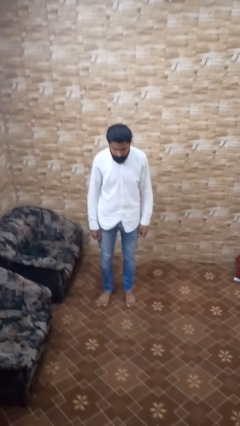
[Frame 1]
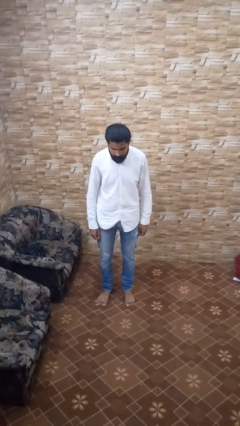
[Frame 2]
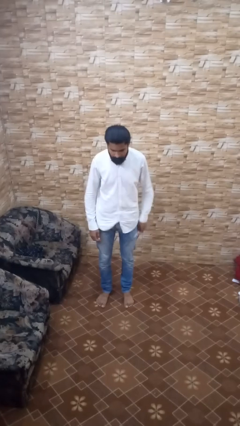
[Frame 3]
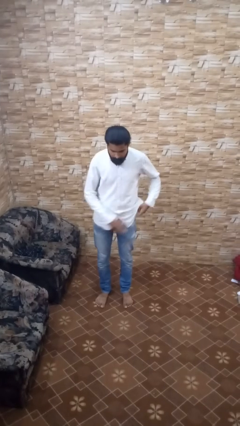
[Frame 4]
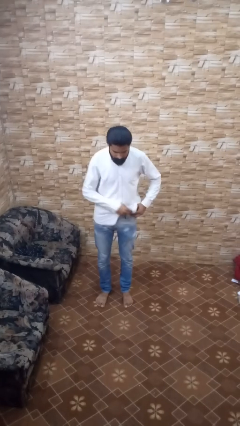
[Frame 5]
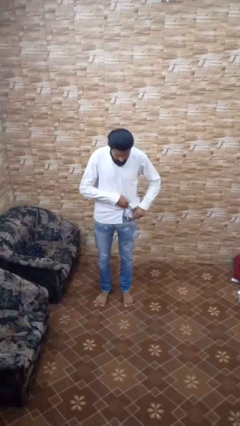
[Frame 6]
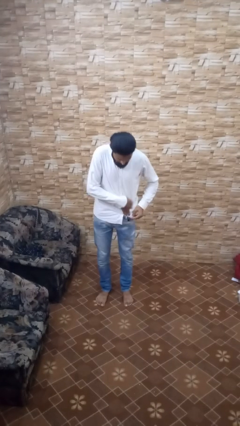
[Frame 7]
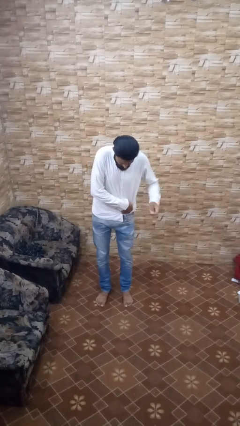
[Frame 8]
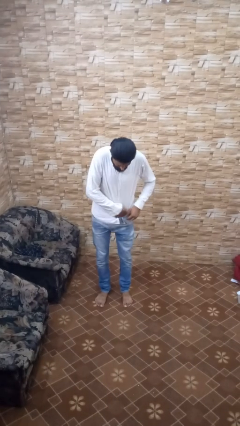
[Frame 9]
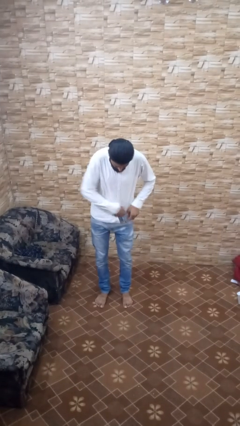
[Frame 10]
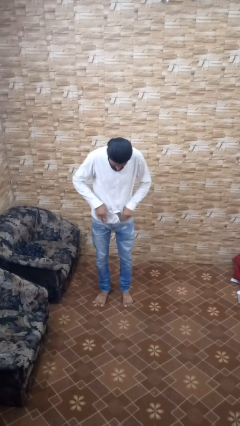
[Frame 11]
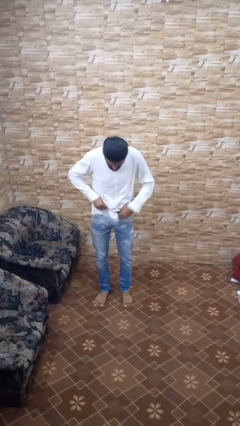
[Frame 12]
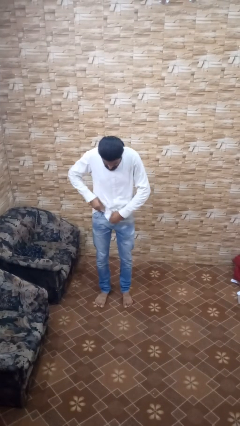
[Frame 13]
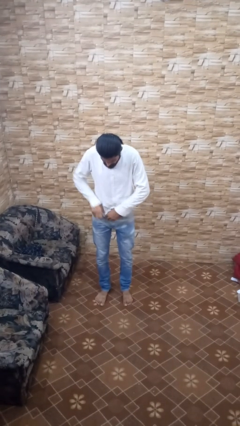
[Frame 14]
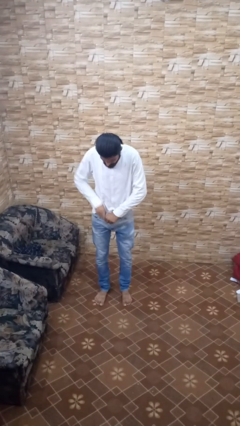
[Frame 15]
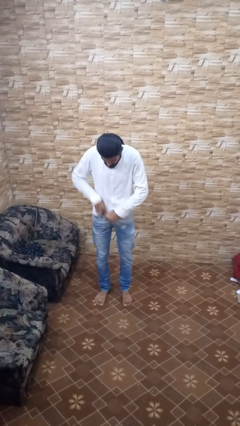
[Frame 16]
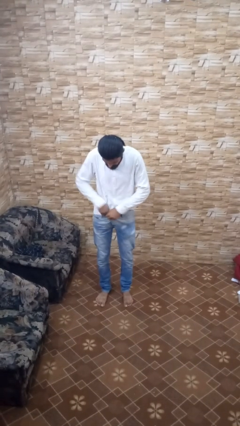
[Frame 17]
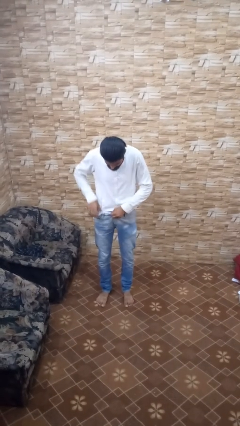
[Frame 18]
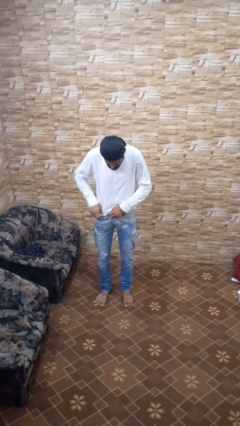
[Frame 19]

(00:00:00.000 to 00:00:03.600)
person tucks in shirt

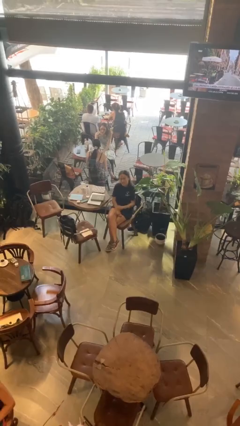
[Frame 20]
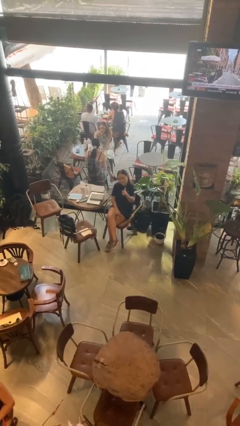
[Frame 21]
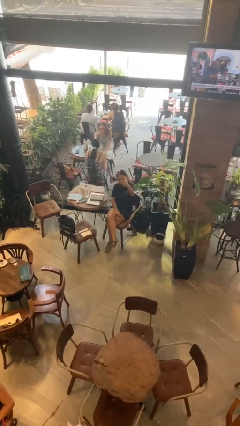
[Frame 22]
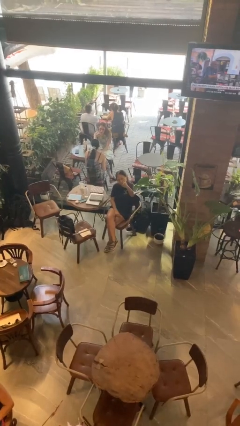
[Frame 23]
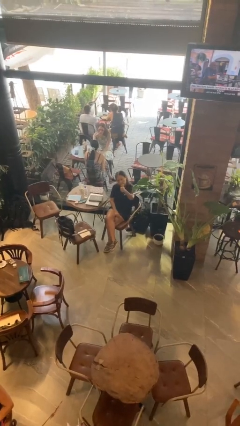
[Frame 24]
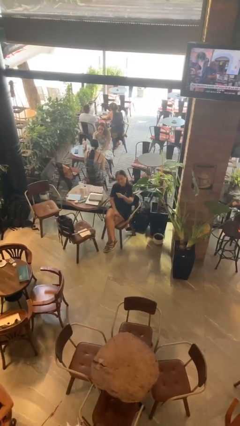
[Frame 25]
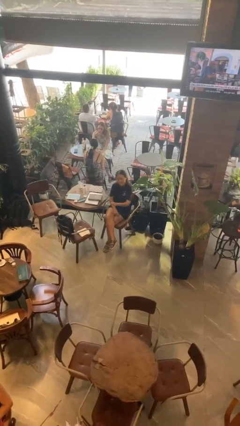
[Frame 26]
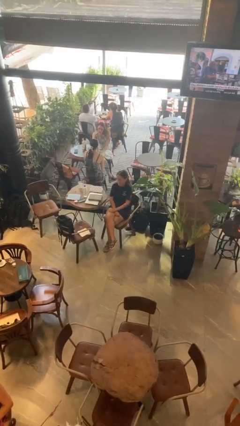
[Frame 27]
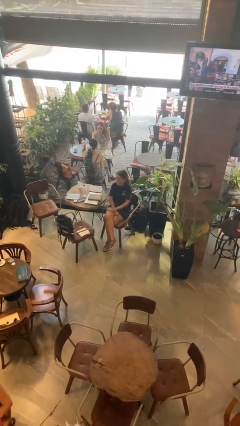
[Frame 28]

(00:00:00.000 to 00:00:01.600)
person gestures thumbs up

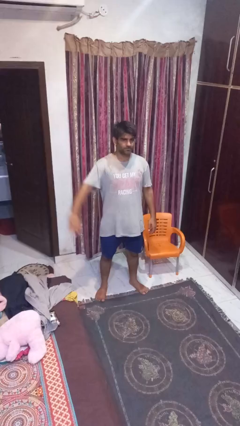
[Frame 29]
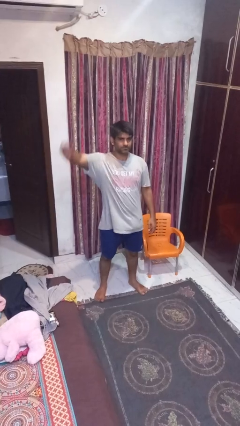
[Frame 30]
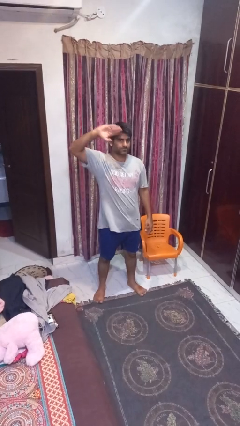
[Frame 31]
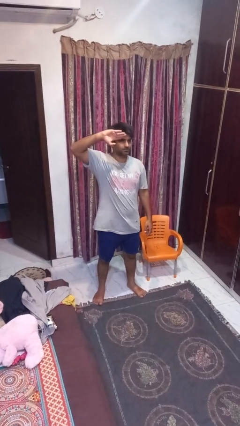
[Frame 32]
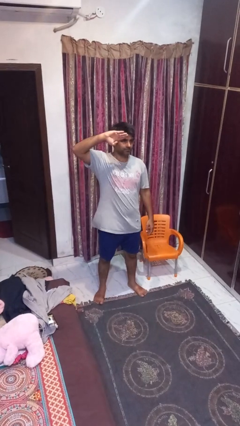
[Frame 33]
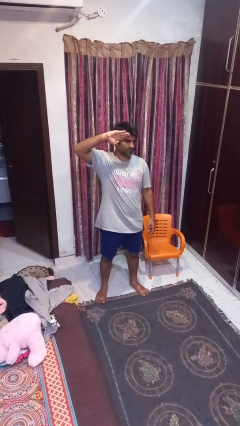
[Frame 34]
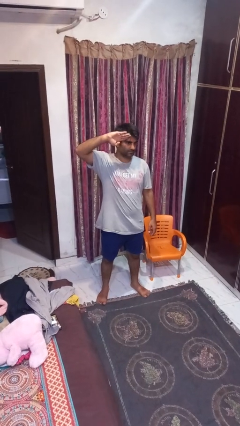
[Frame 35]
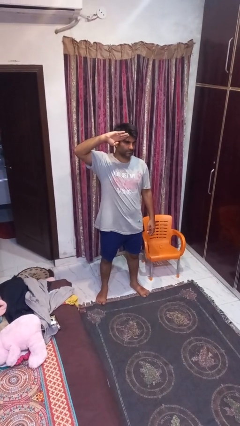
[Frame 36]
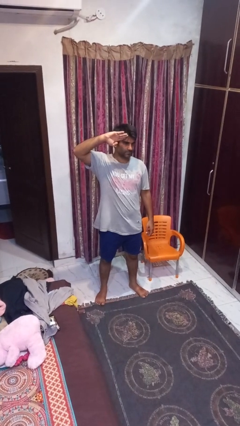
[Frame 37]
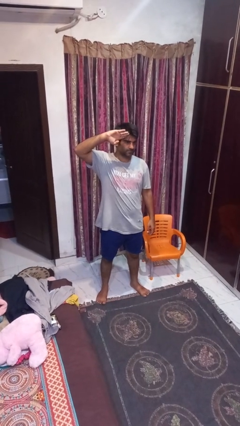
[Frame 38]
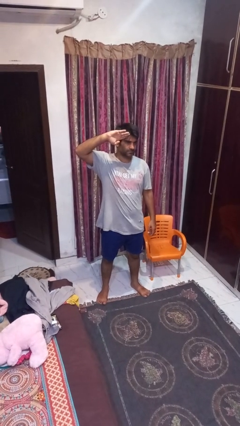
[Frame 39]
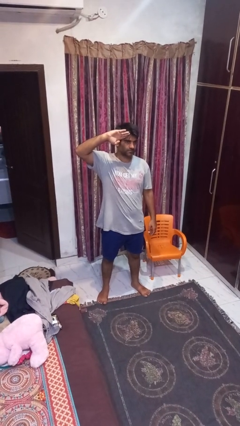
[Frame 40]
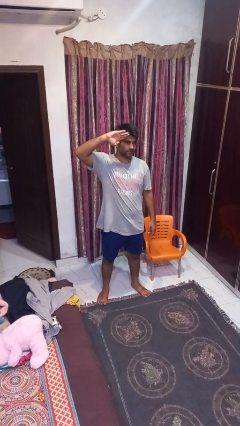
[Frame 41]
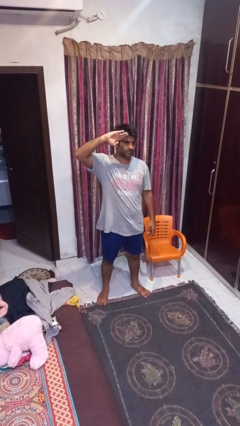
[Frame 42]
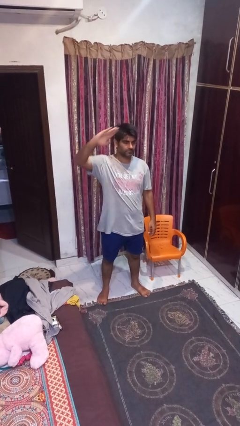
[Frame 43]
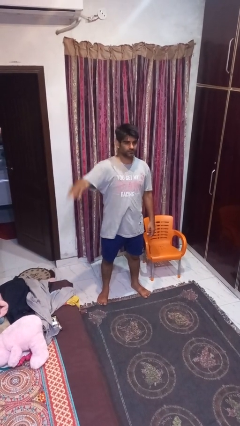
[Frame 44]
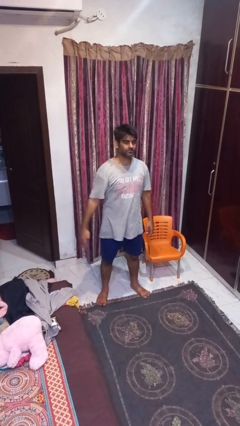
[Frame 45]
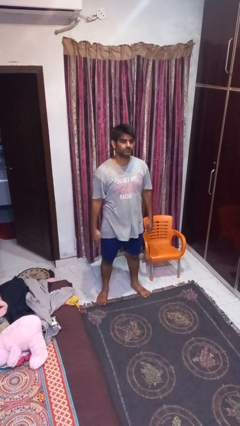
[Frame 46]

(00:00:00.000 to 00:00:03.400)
person salutes

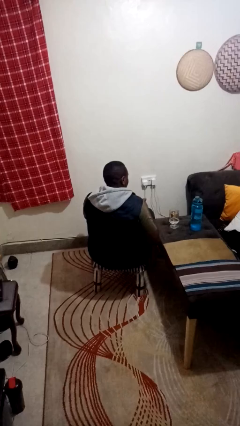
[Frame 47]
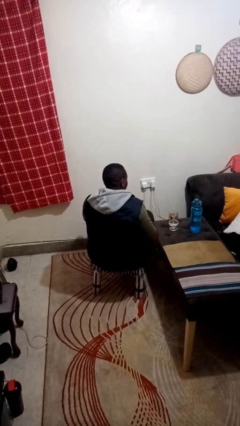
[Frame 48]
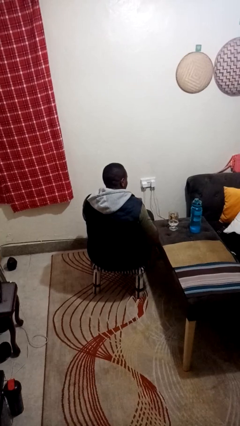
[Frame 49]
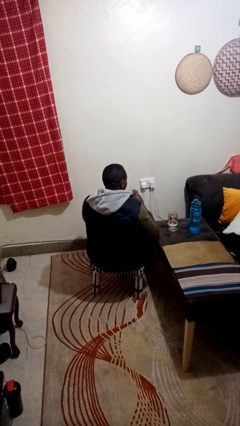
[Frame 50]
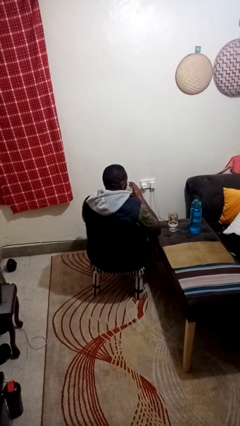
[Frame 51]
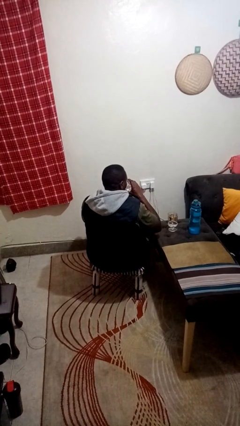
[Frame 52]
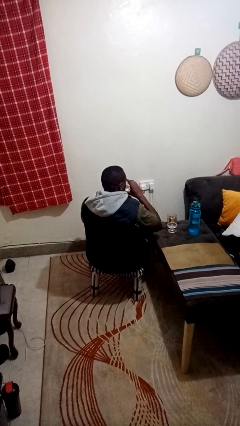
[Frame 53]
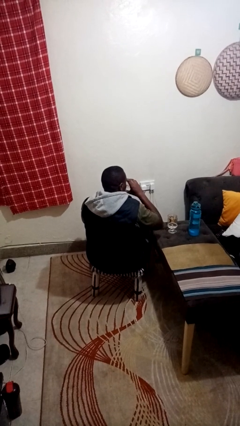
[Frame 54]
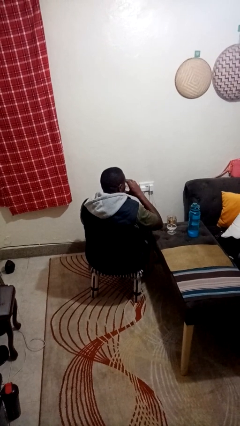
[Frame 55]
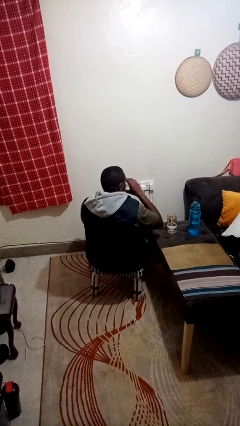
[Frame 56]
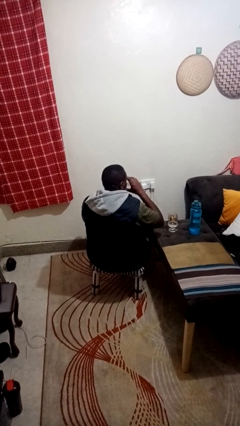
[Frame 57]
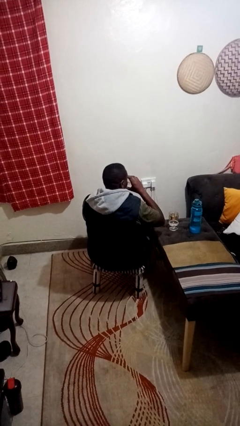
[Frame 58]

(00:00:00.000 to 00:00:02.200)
person drinks from shotglass

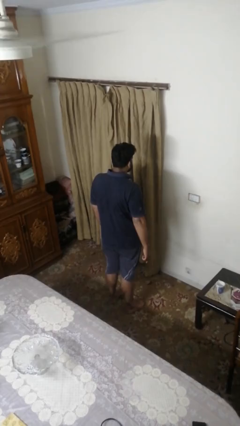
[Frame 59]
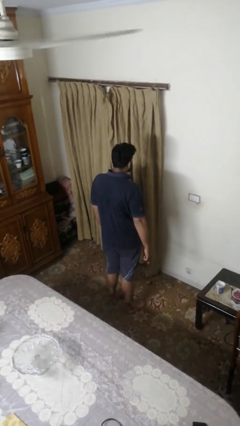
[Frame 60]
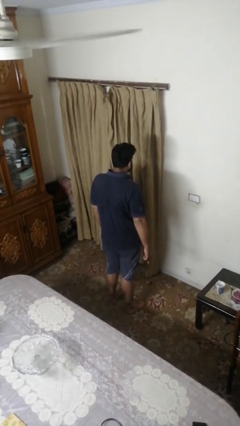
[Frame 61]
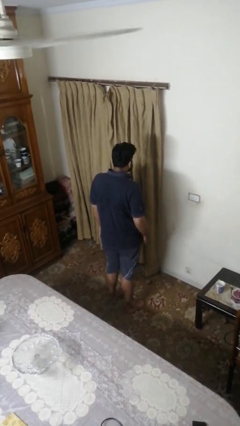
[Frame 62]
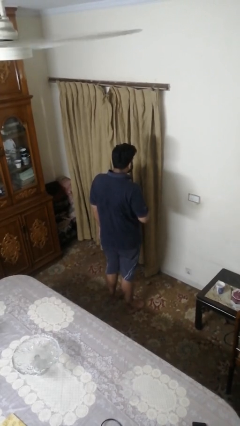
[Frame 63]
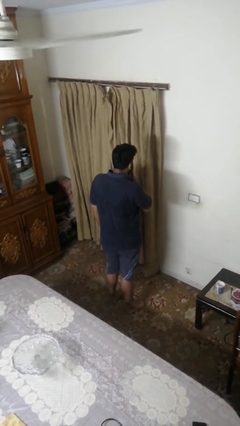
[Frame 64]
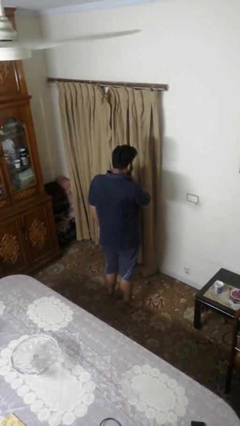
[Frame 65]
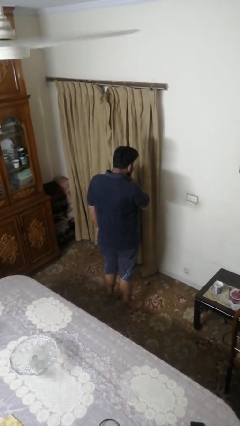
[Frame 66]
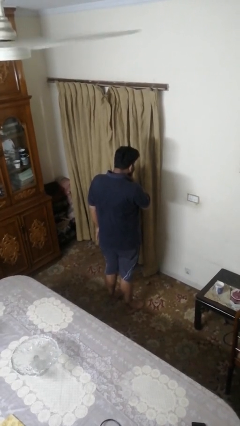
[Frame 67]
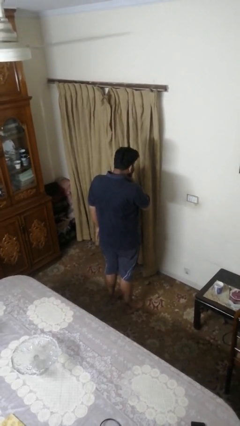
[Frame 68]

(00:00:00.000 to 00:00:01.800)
person strokes chin

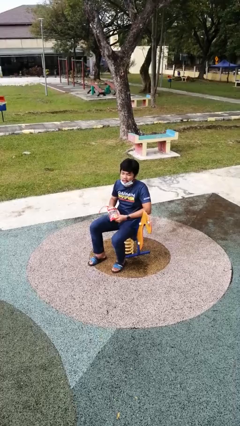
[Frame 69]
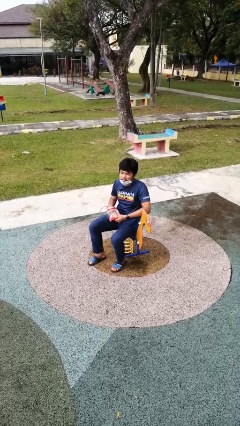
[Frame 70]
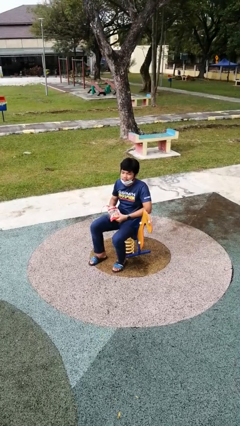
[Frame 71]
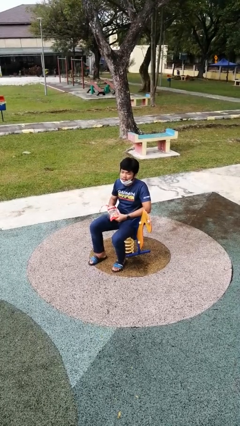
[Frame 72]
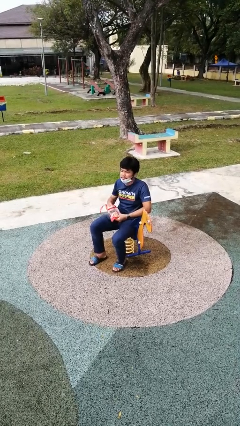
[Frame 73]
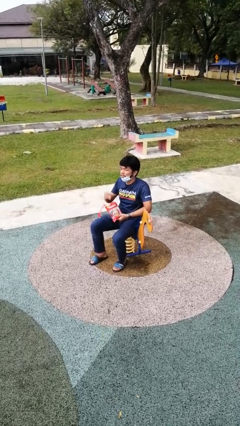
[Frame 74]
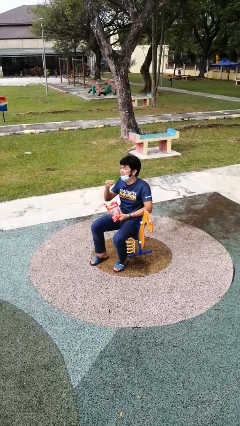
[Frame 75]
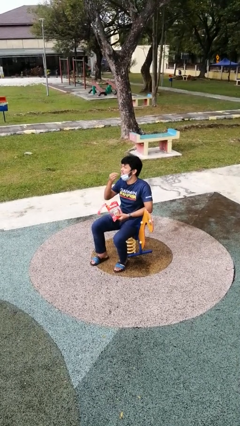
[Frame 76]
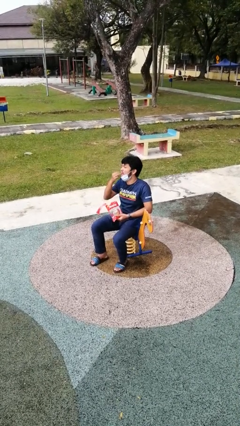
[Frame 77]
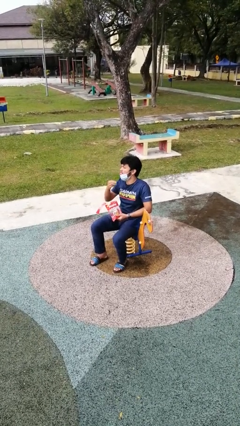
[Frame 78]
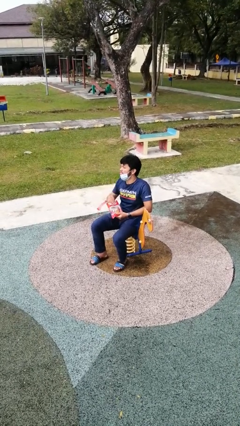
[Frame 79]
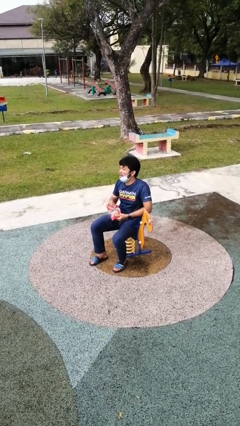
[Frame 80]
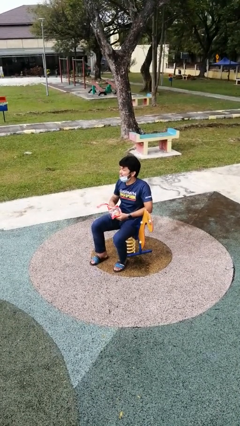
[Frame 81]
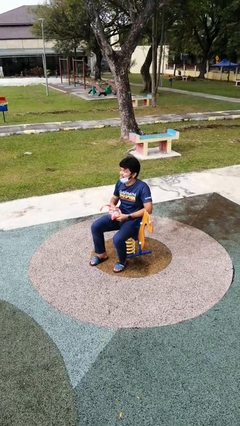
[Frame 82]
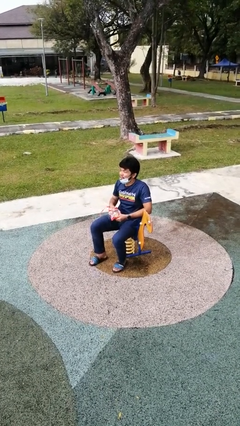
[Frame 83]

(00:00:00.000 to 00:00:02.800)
person eats snack from bag

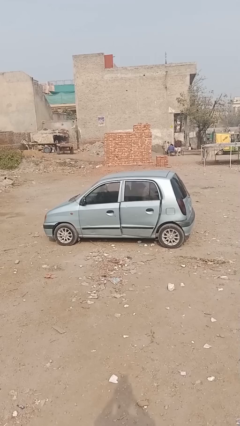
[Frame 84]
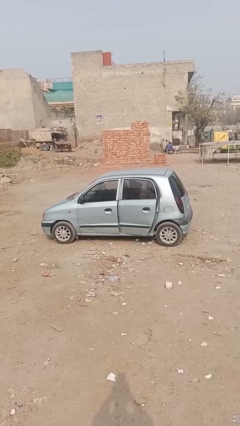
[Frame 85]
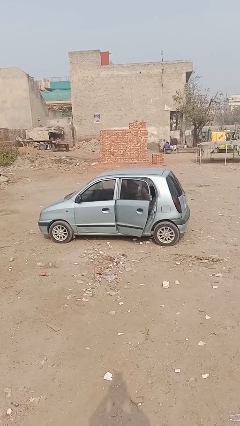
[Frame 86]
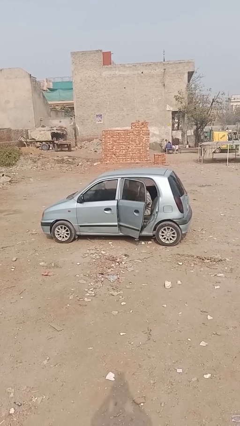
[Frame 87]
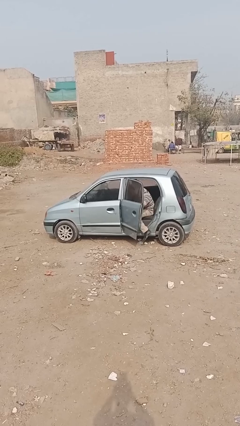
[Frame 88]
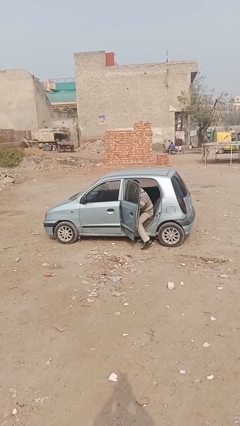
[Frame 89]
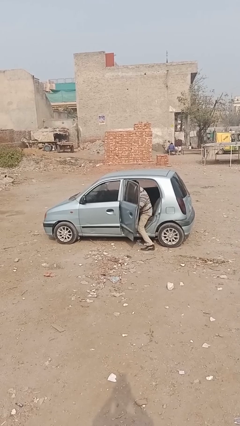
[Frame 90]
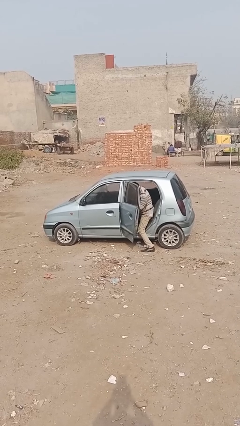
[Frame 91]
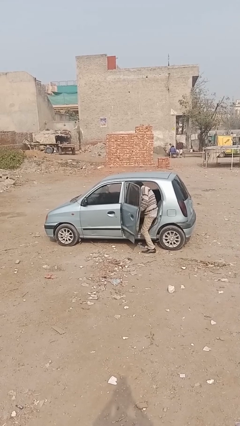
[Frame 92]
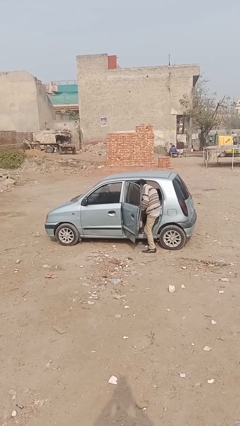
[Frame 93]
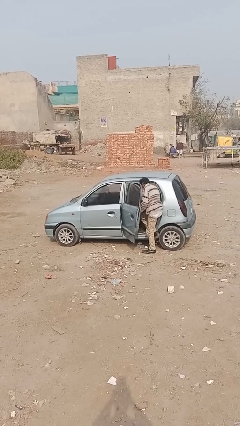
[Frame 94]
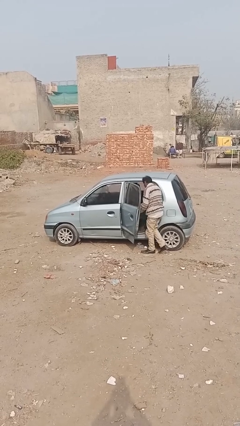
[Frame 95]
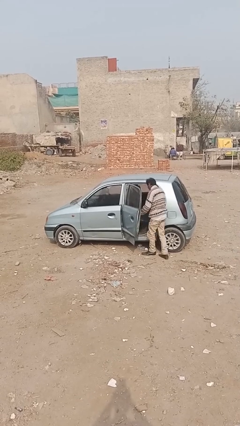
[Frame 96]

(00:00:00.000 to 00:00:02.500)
car drops off person
